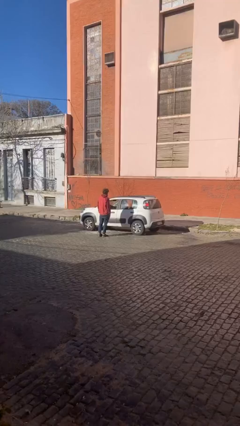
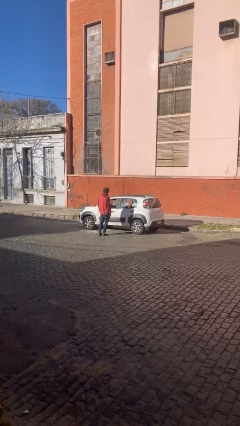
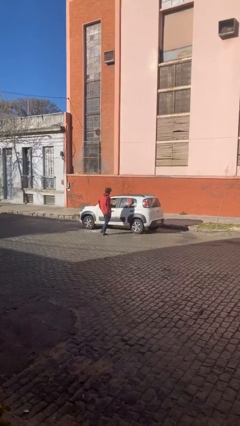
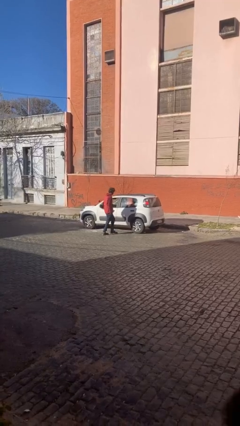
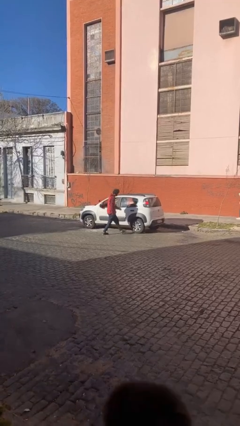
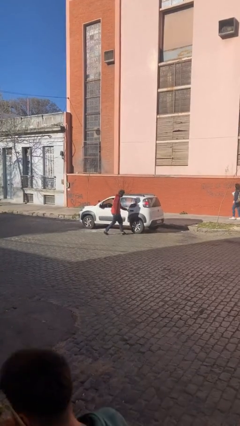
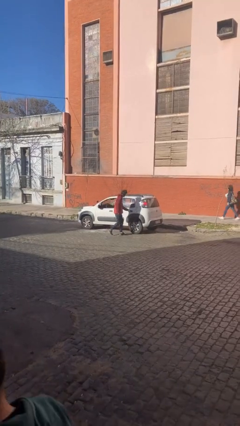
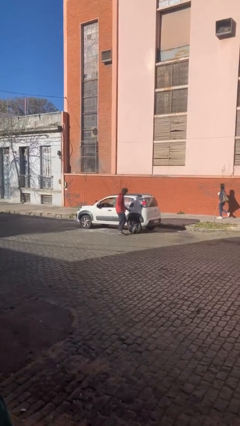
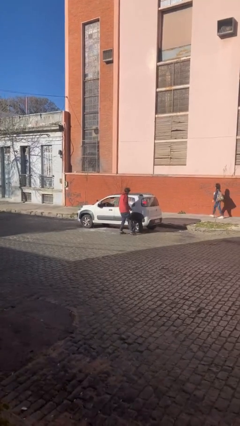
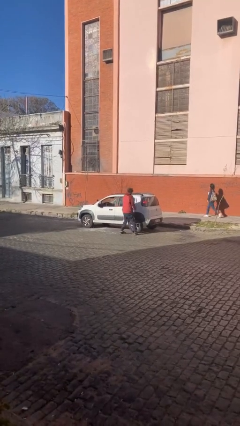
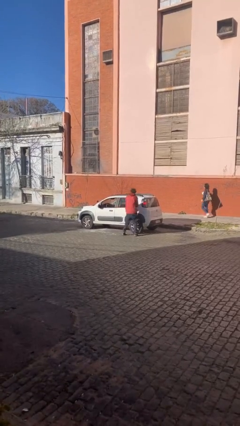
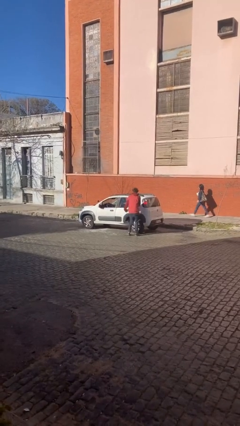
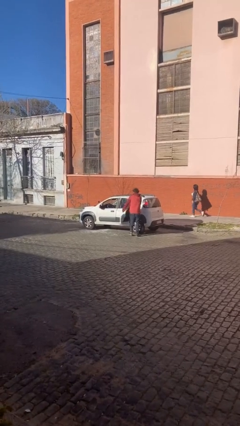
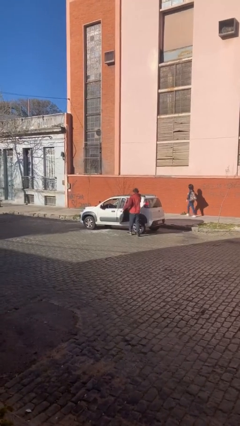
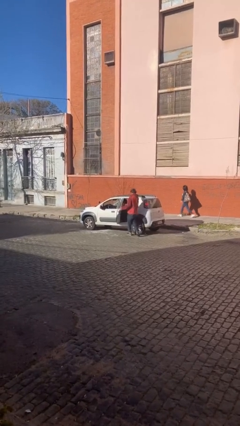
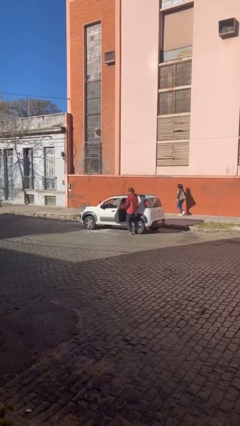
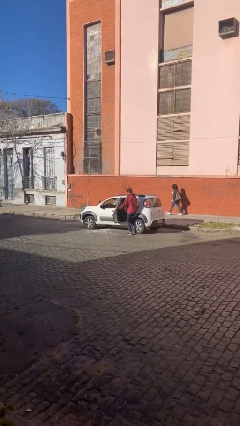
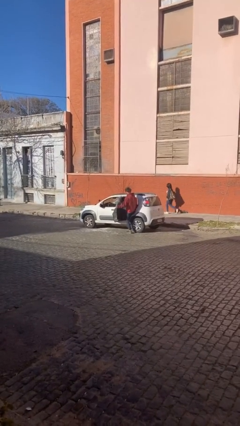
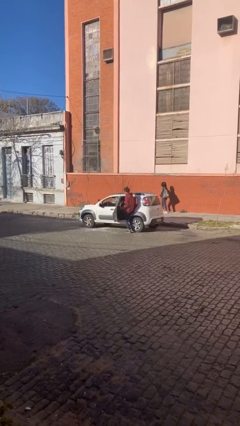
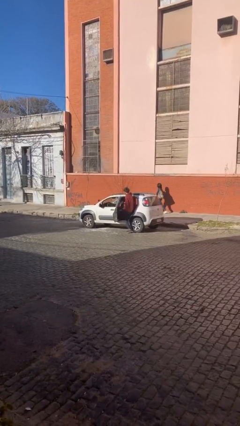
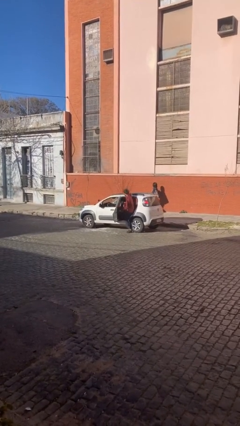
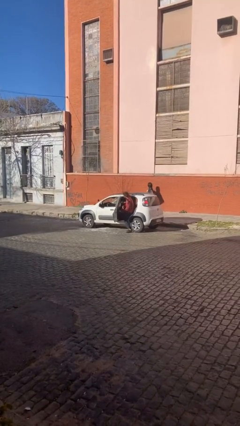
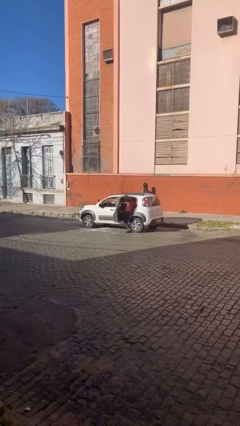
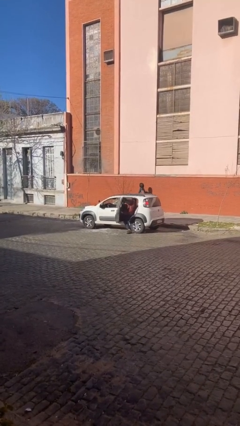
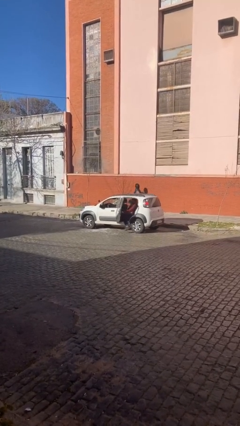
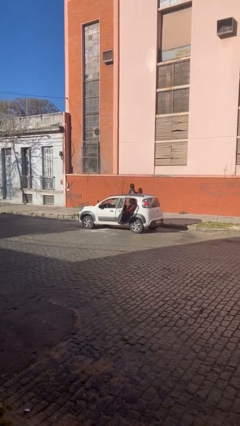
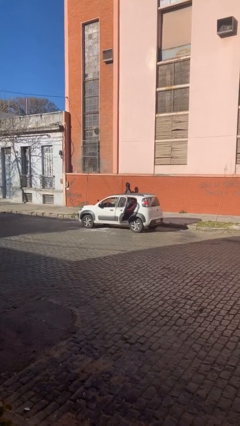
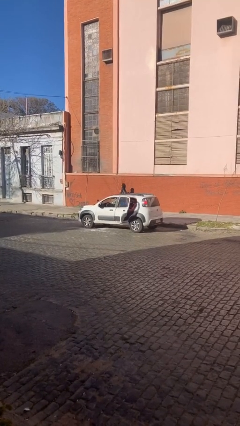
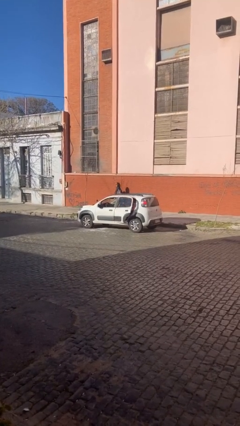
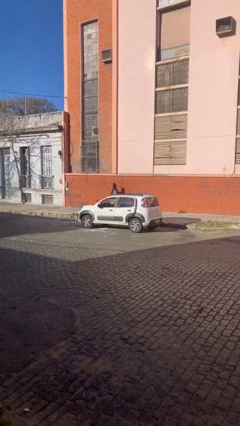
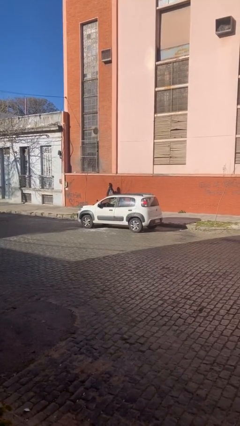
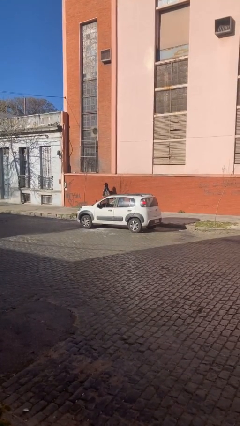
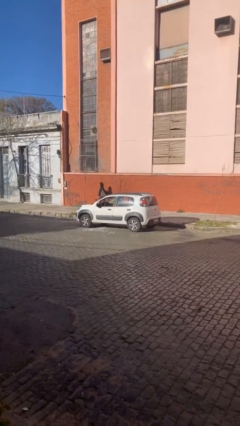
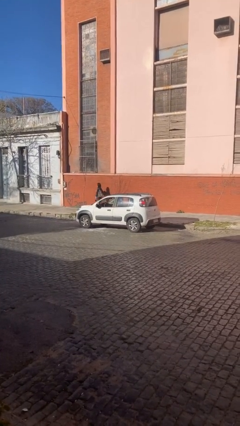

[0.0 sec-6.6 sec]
car picks up person

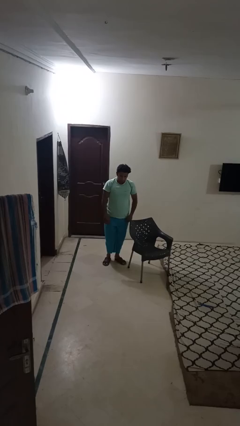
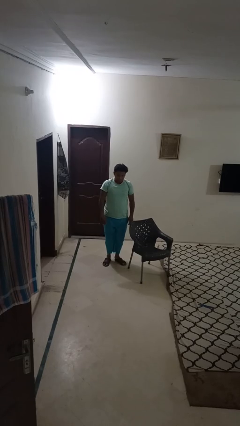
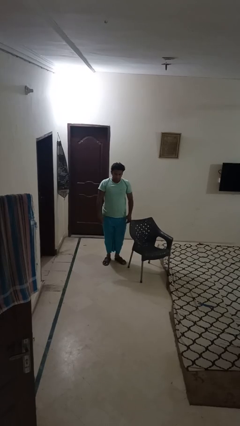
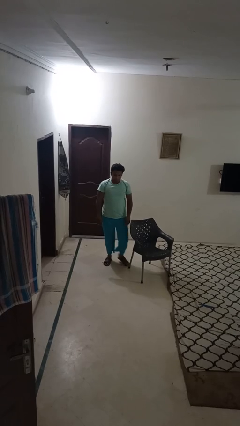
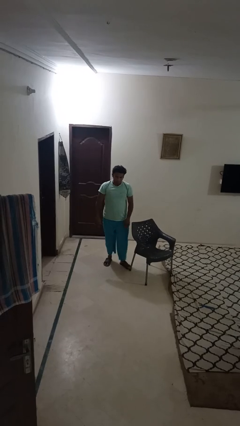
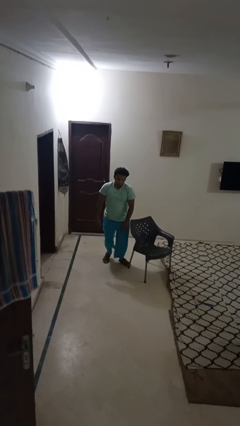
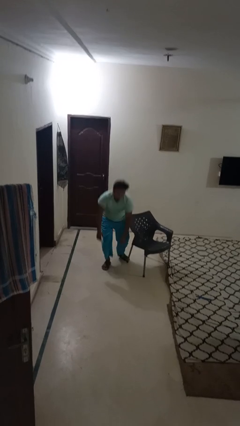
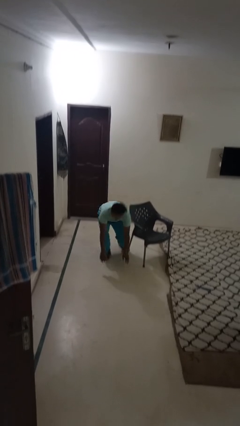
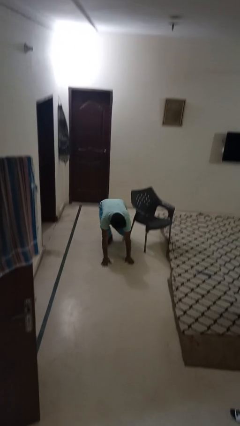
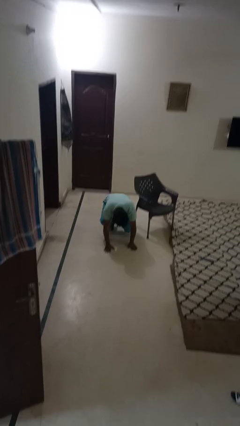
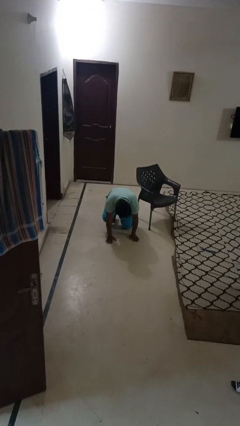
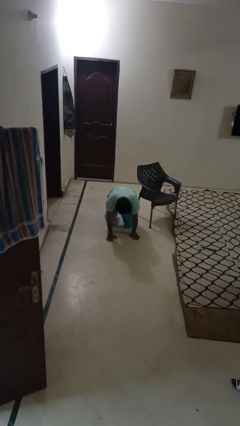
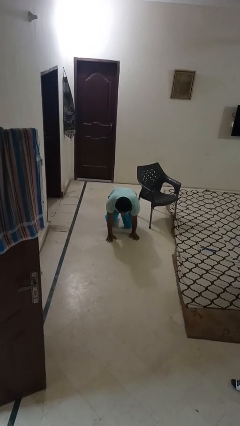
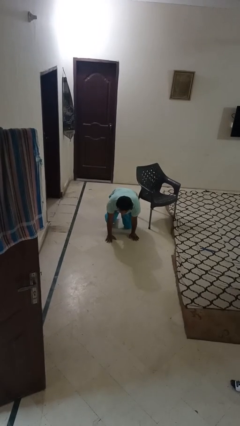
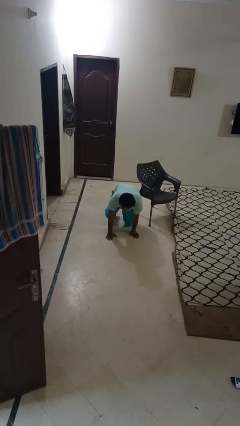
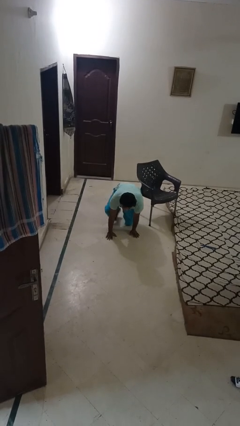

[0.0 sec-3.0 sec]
person trips on object on floor

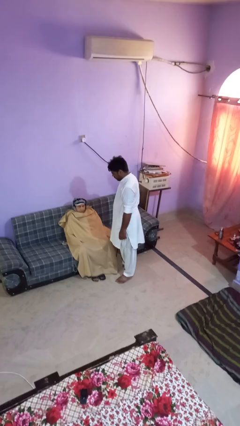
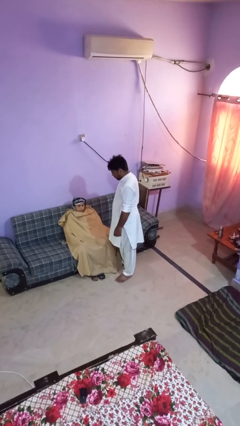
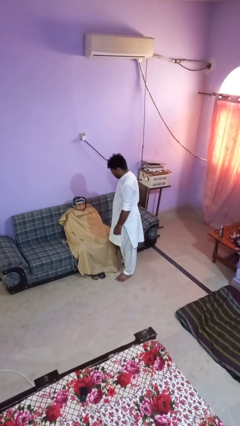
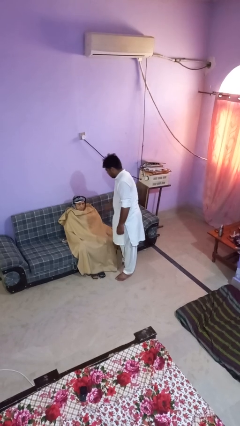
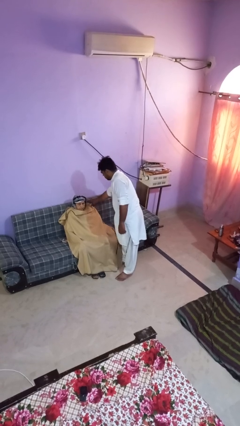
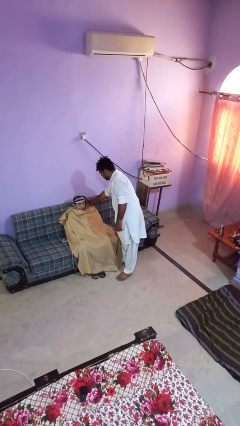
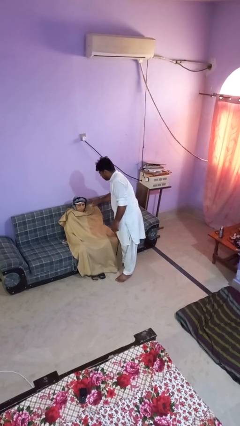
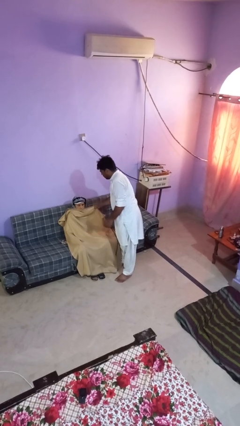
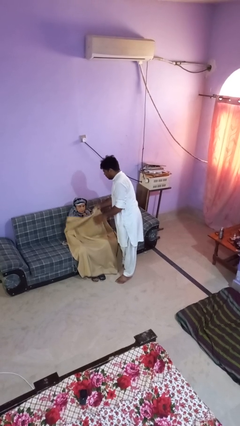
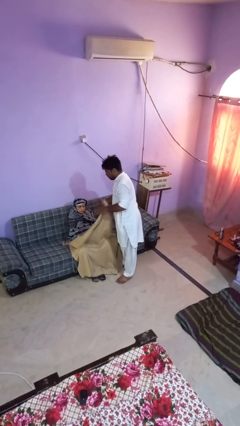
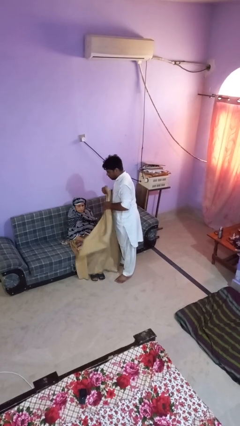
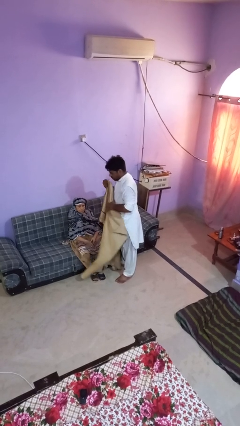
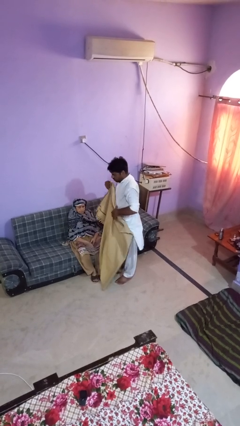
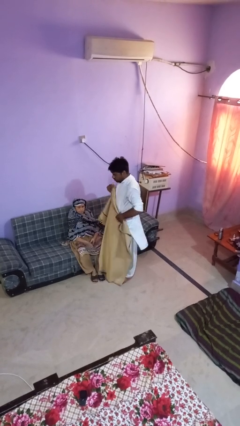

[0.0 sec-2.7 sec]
person uncovers friend with blanket

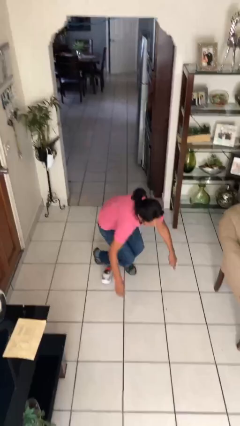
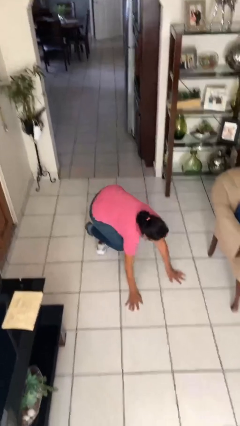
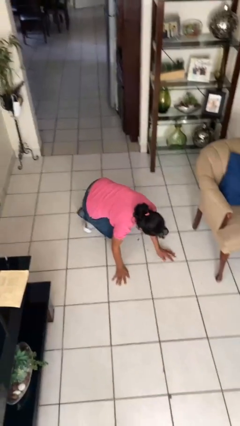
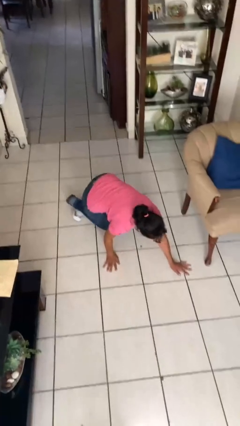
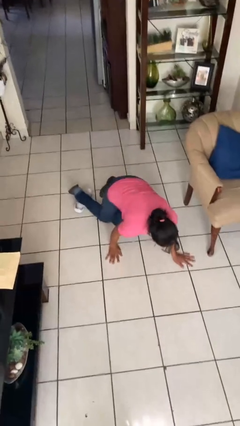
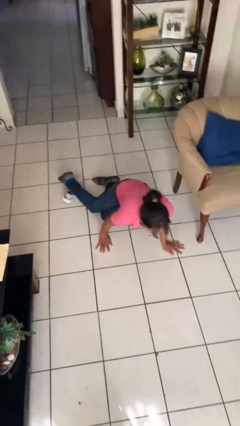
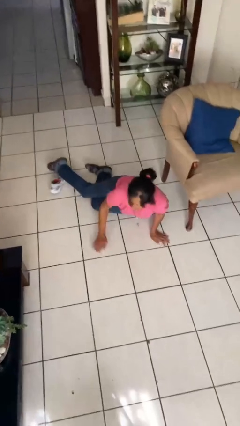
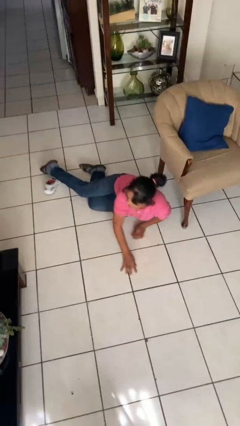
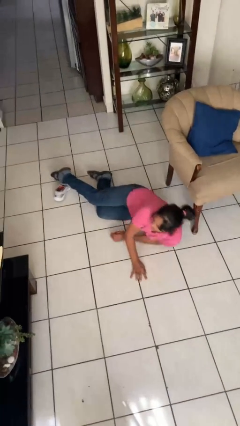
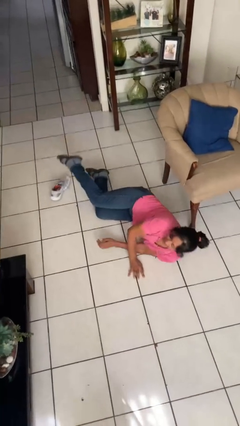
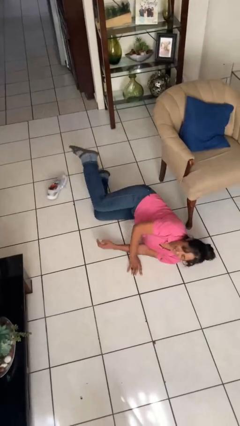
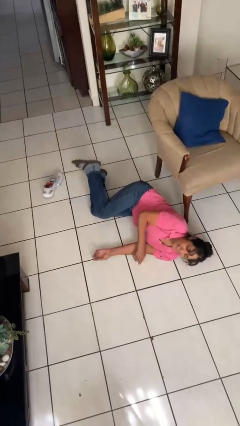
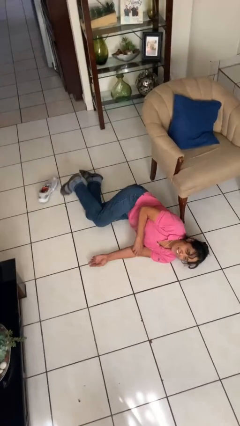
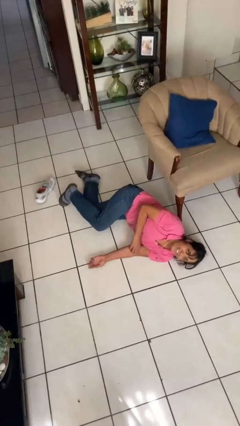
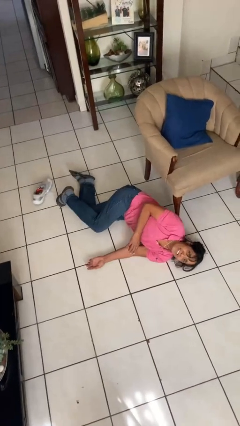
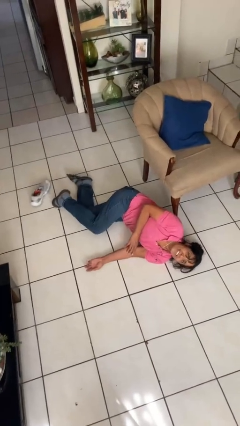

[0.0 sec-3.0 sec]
person lies down on floor

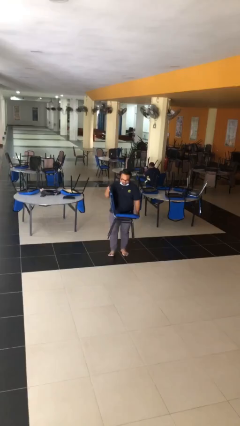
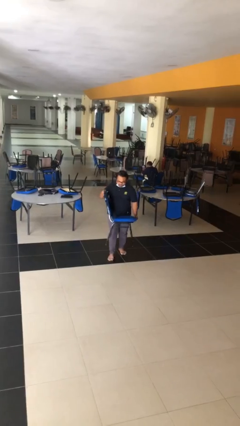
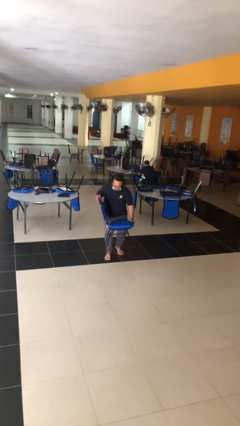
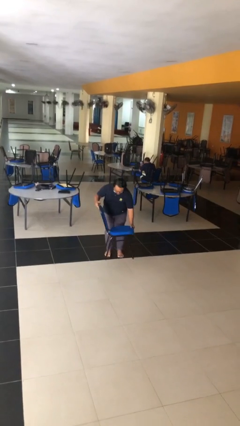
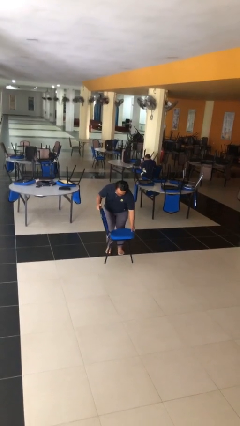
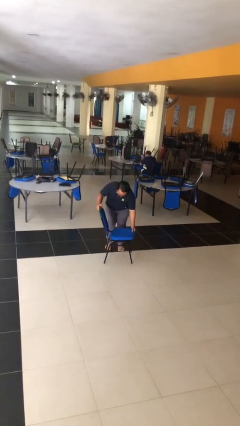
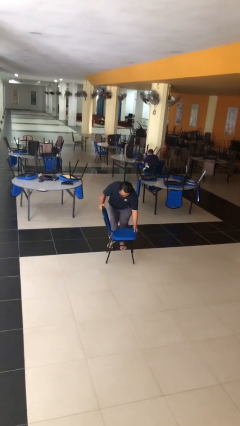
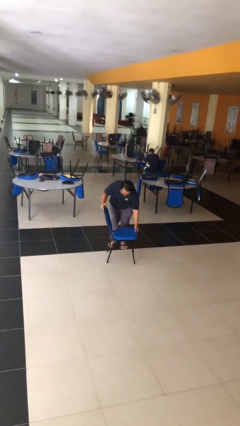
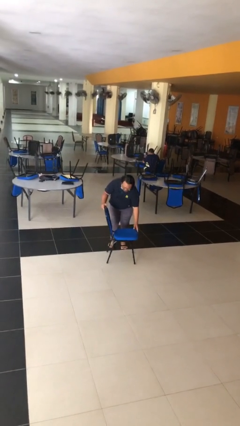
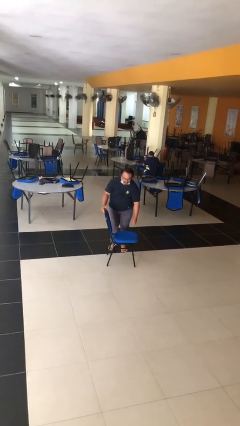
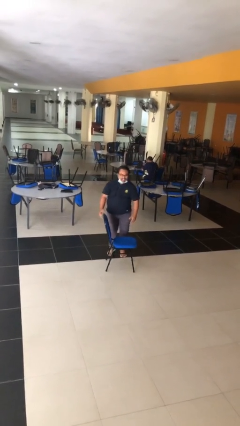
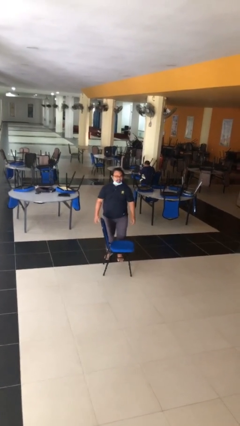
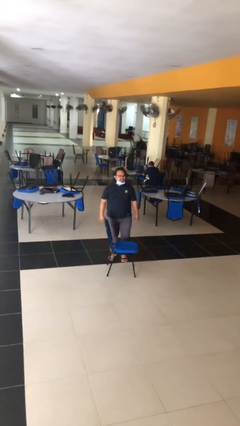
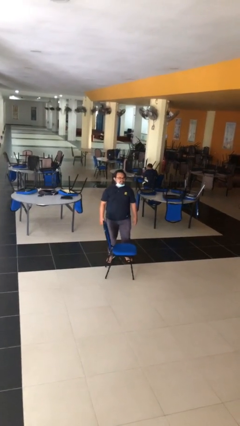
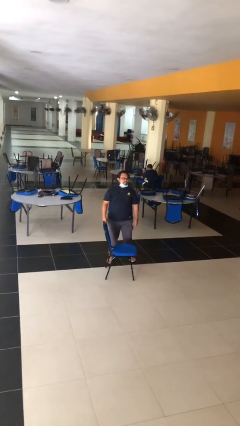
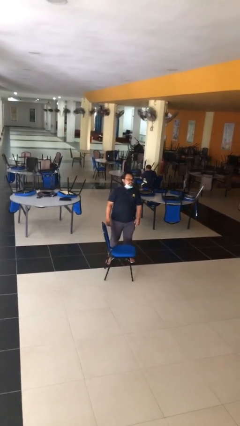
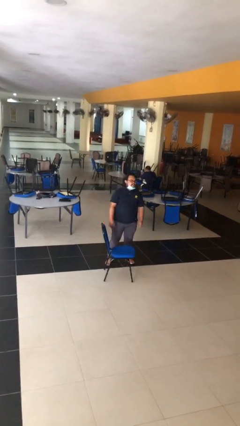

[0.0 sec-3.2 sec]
person puts down object on floor
